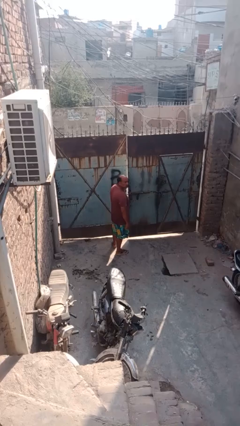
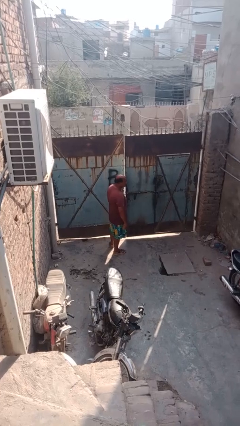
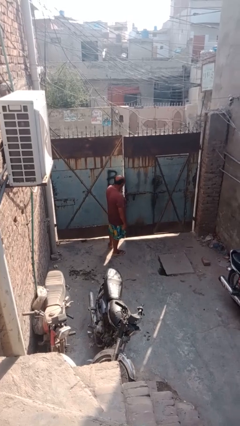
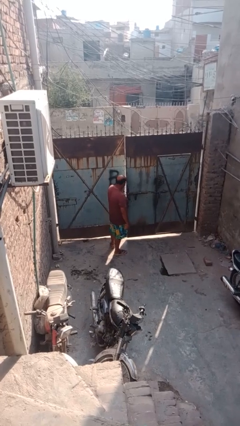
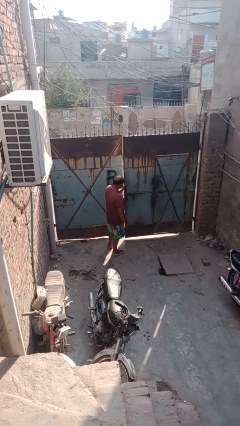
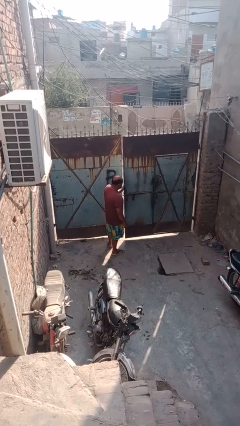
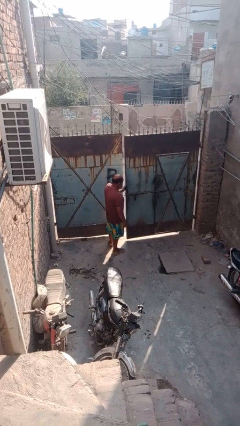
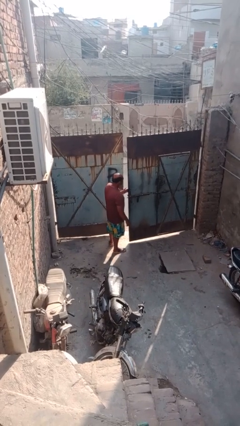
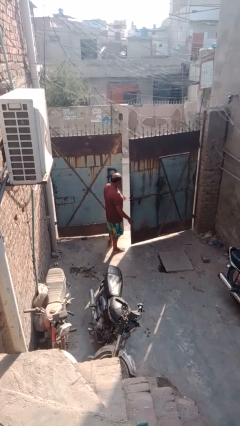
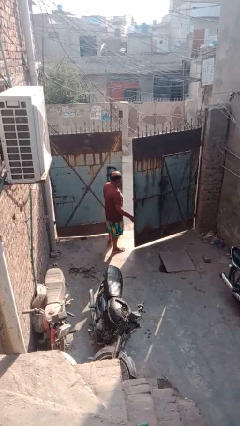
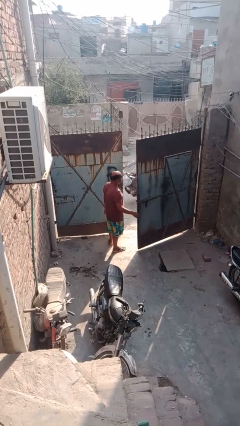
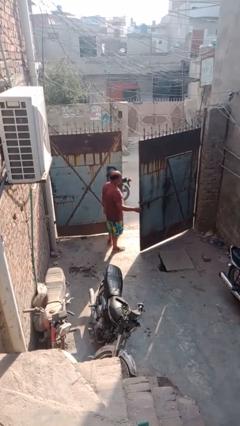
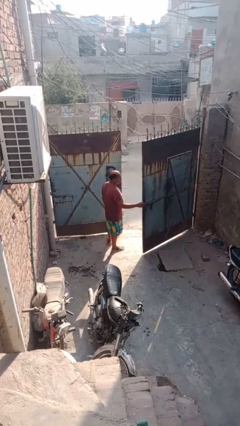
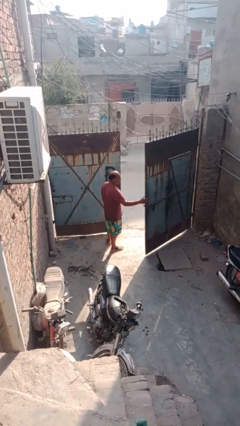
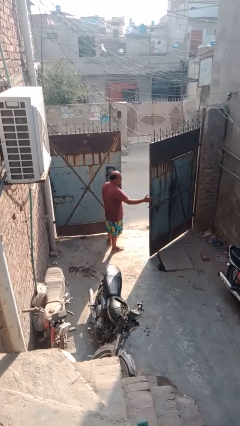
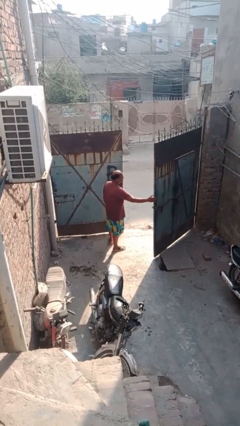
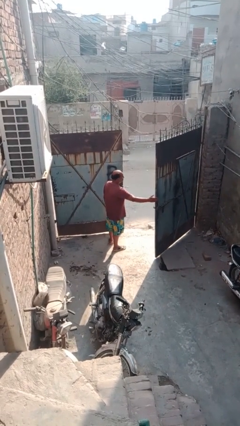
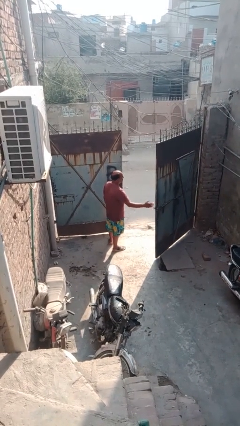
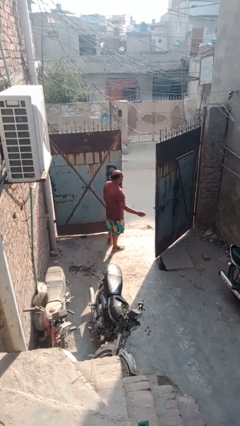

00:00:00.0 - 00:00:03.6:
person opens gate

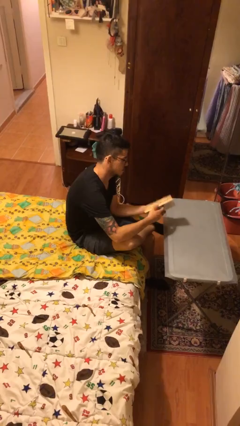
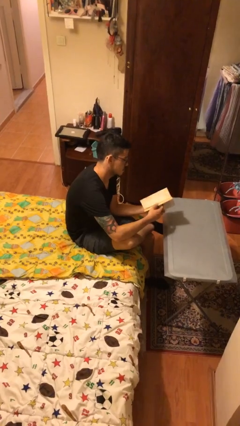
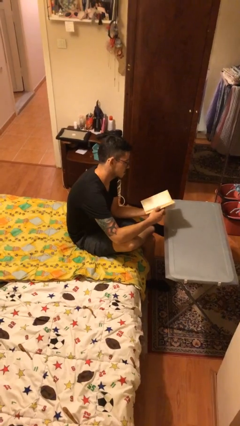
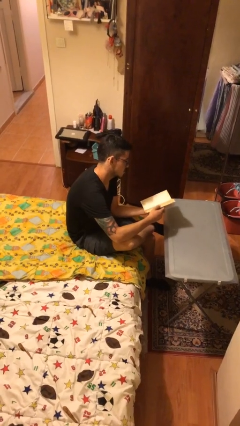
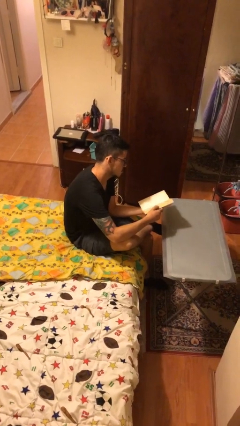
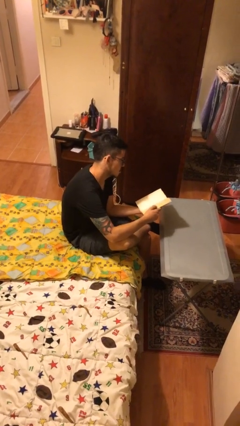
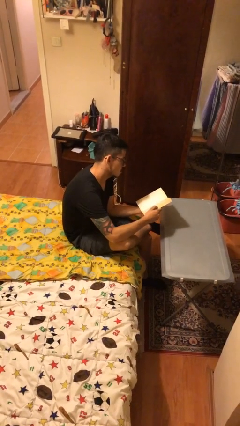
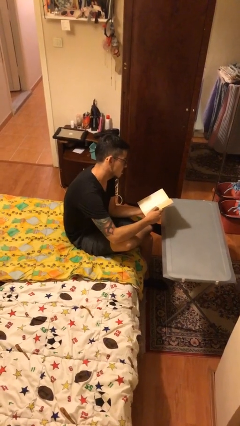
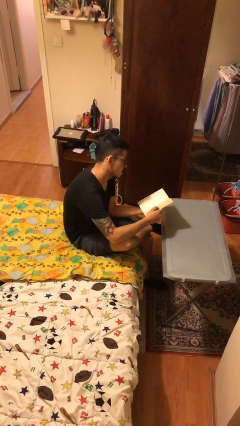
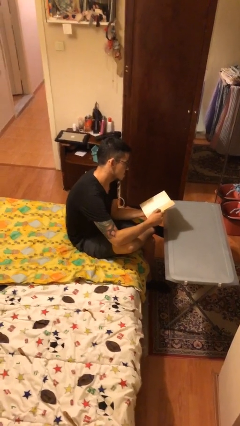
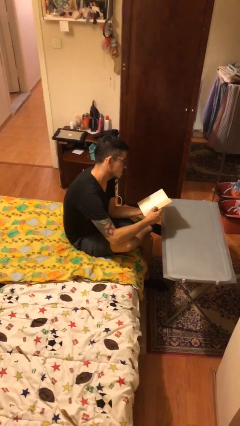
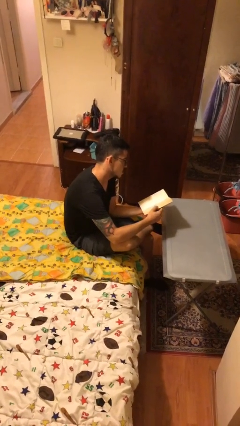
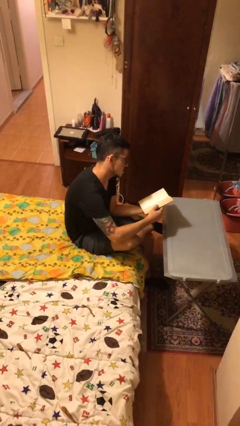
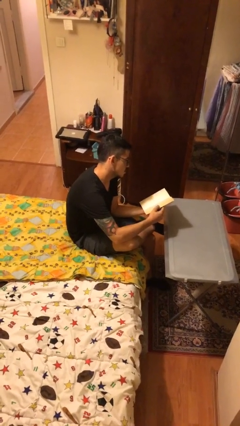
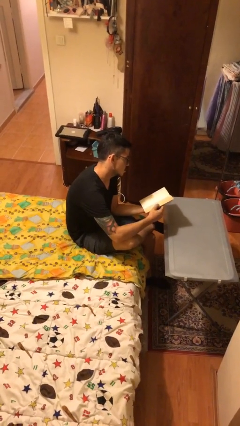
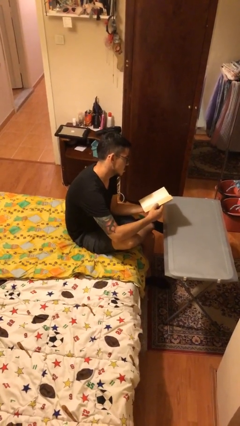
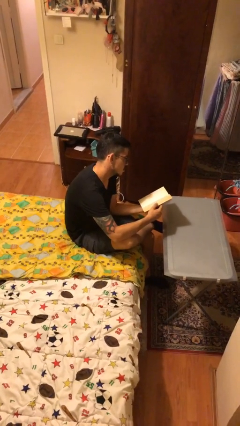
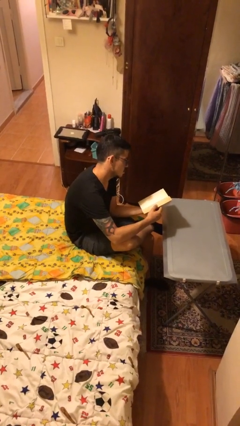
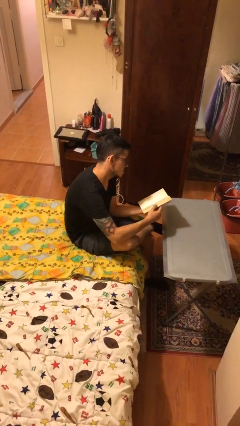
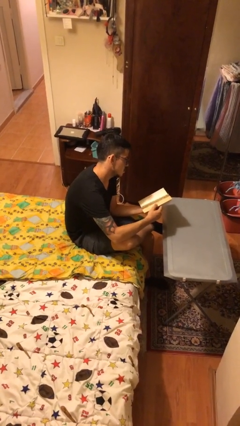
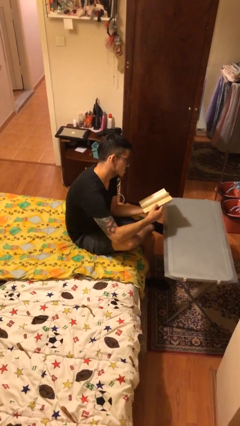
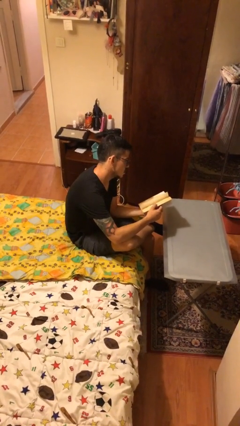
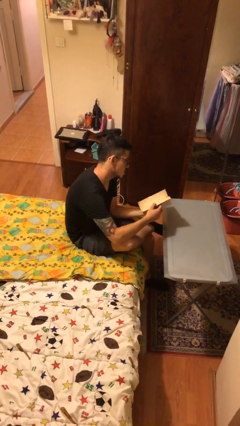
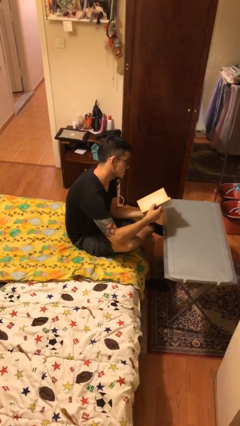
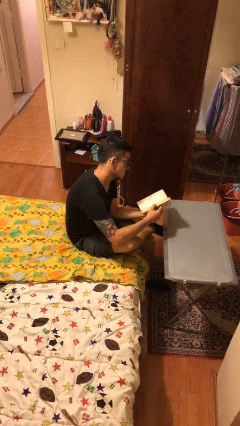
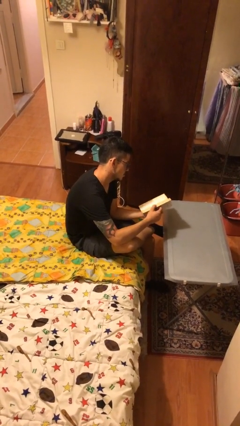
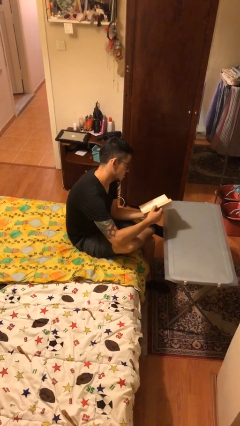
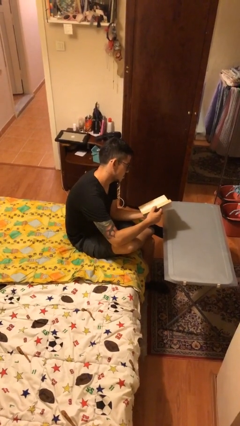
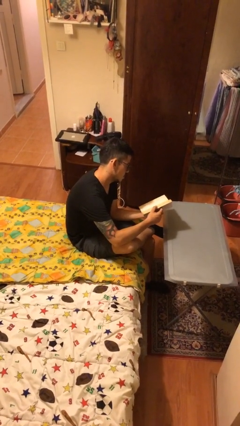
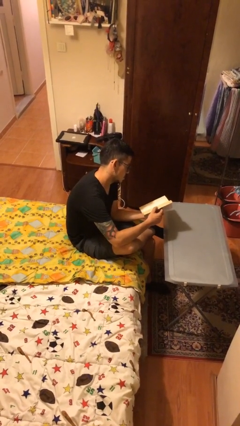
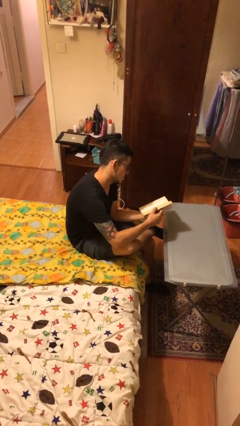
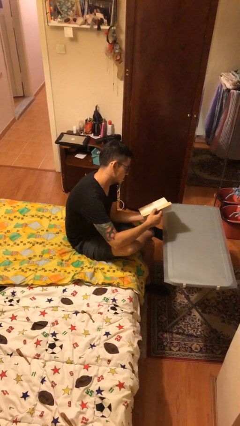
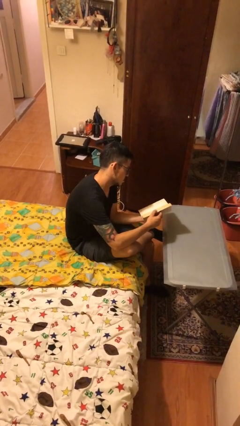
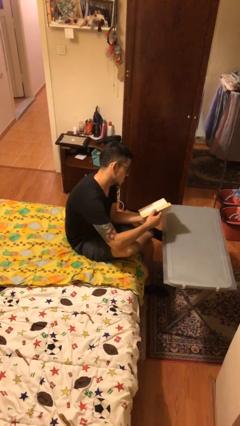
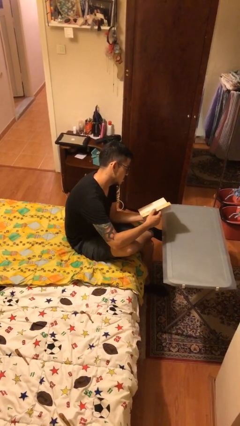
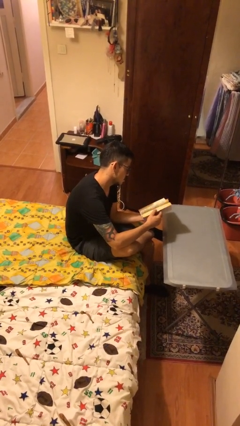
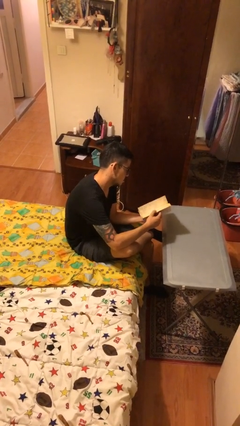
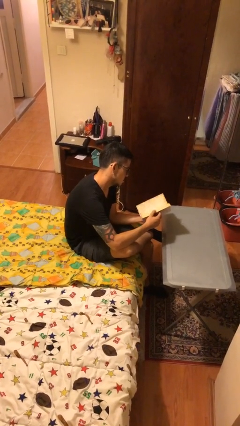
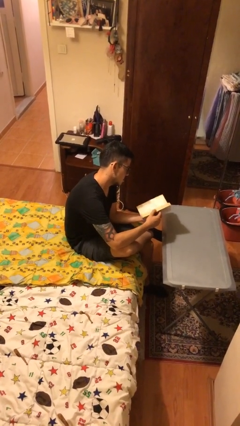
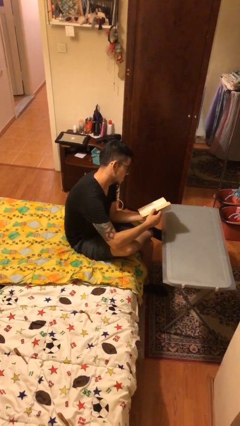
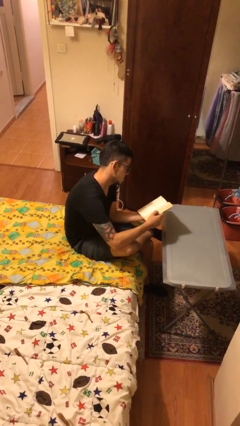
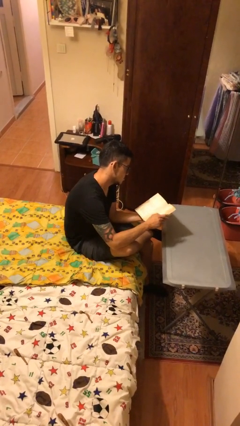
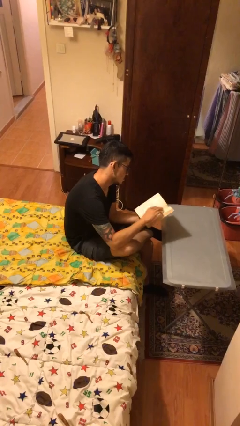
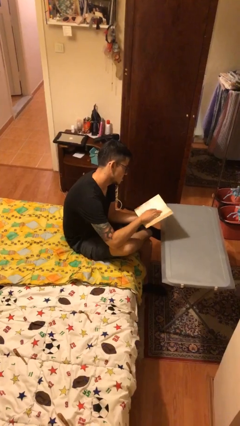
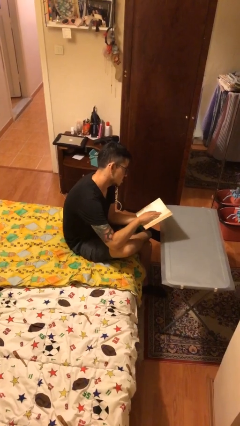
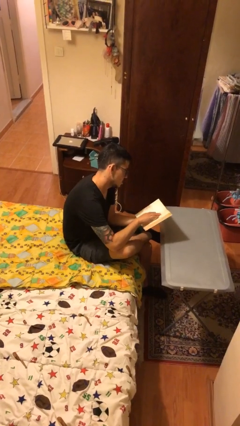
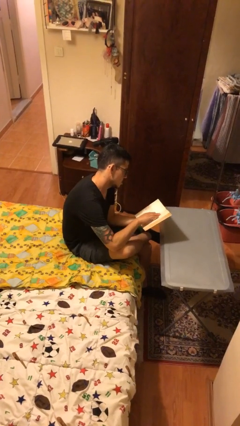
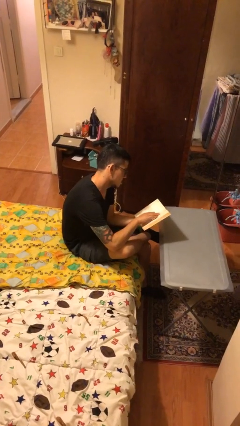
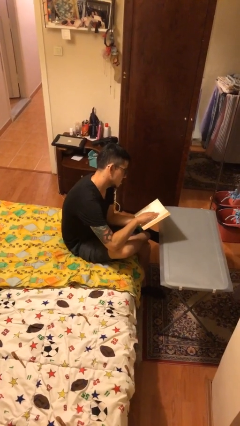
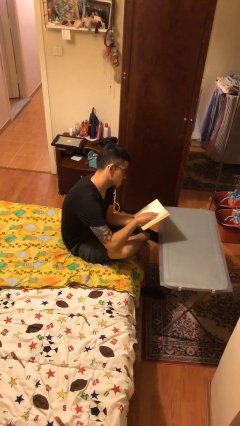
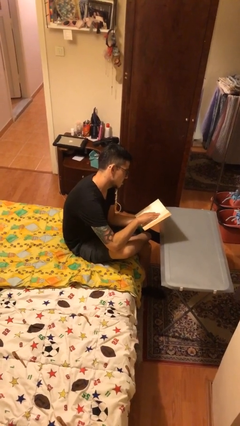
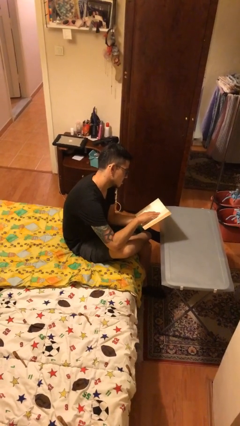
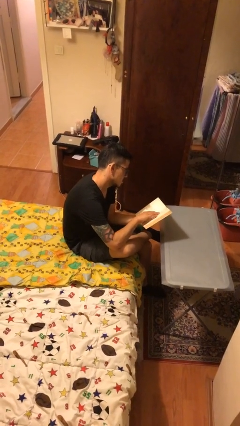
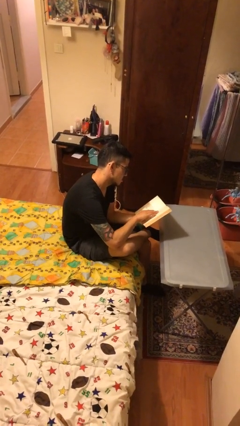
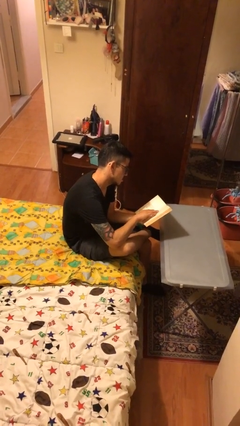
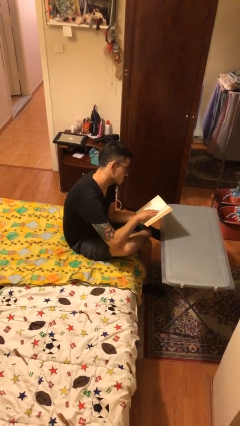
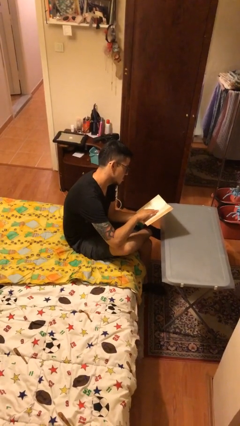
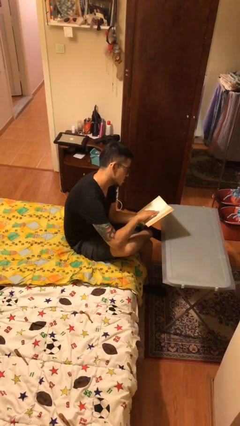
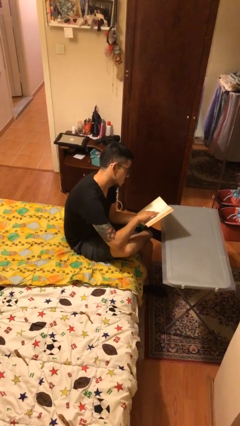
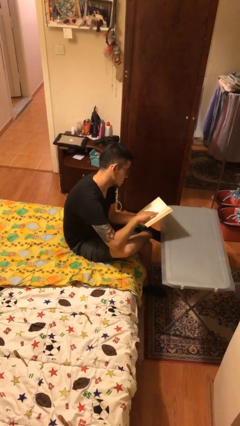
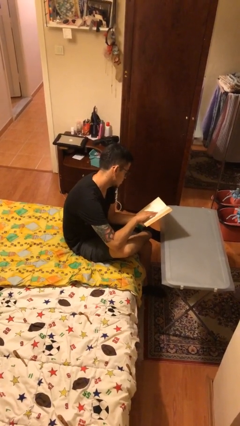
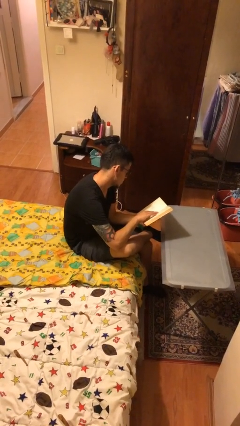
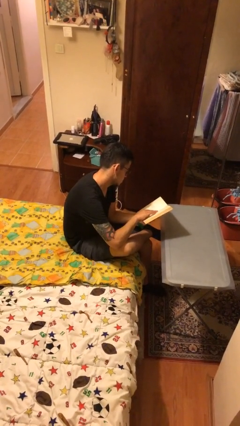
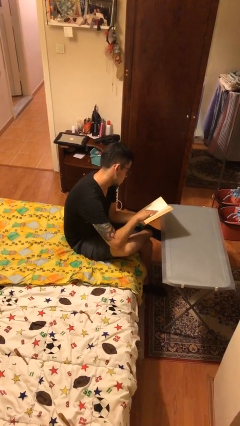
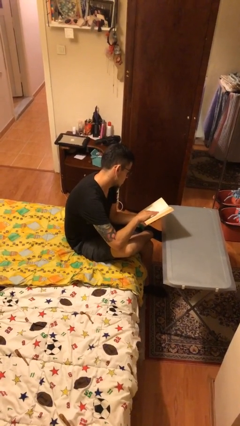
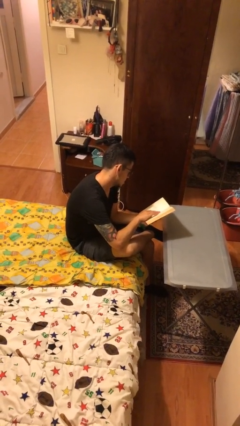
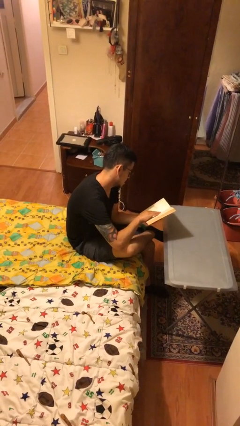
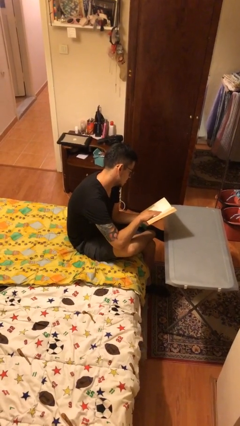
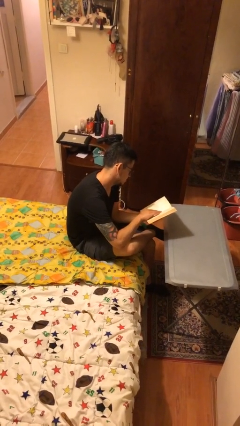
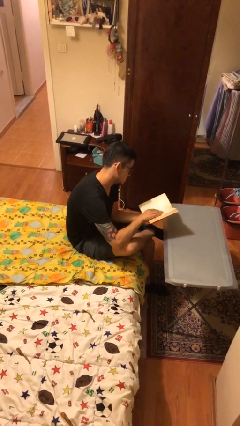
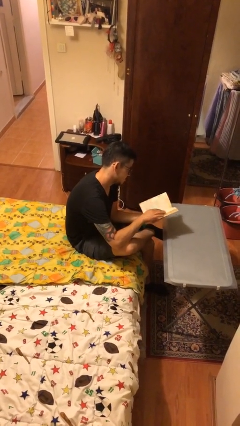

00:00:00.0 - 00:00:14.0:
person reads document

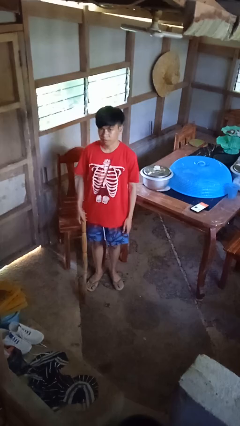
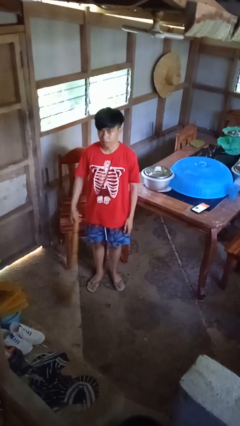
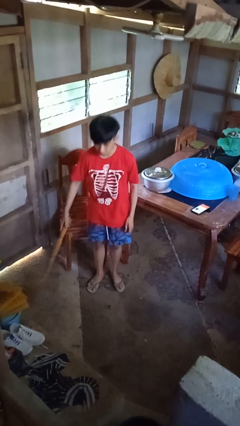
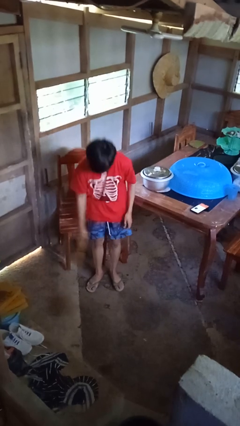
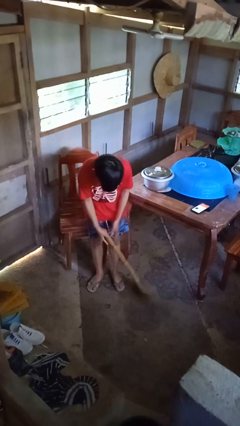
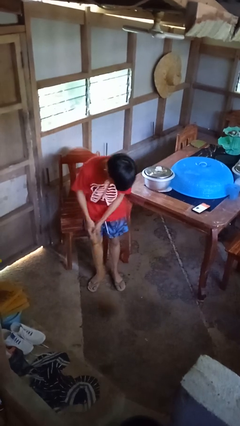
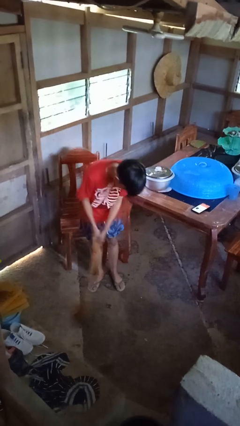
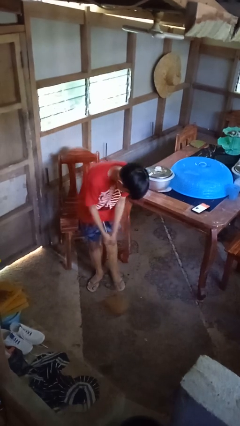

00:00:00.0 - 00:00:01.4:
person sweeps floor
